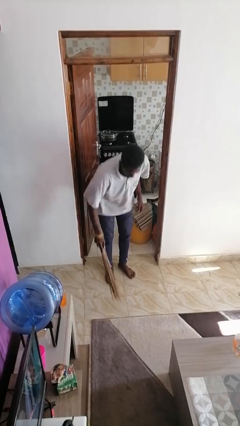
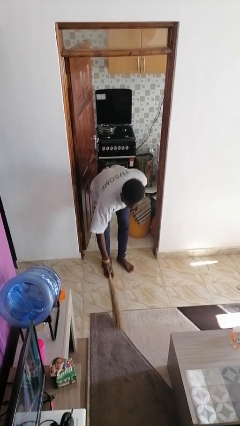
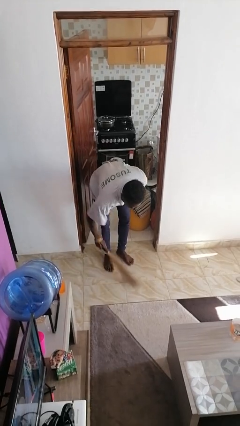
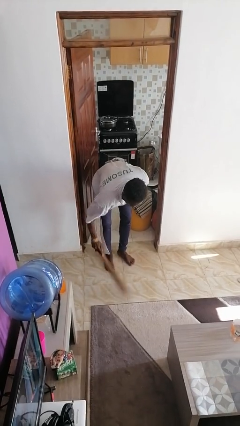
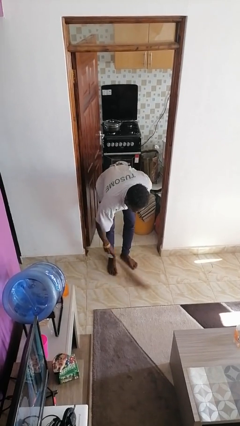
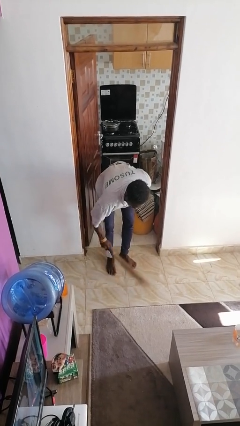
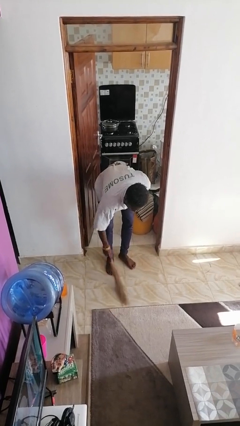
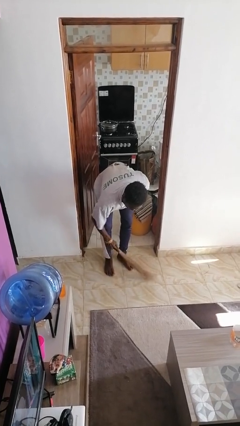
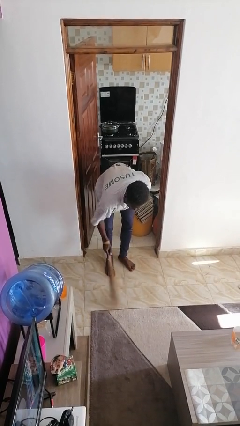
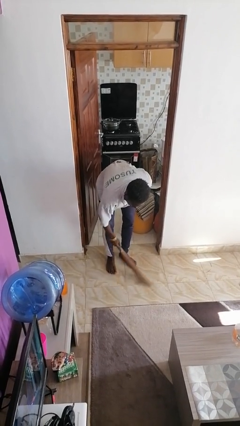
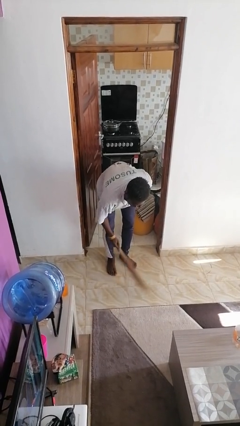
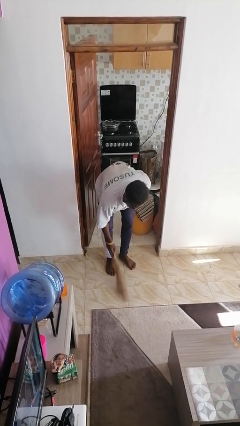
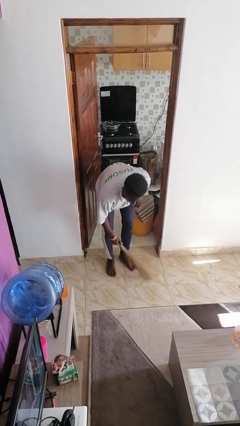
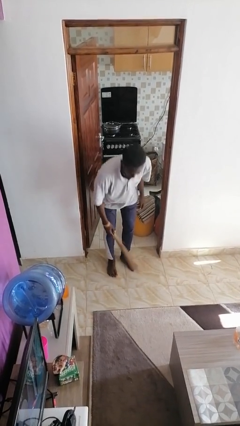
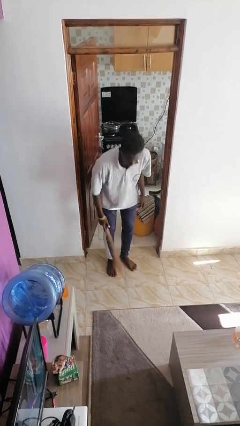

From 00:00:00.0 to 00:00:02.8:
person sweeps floor

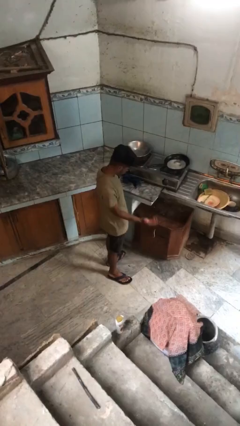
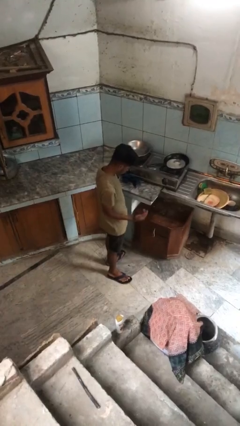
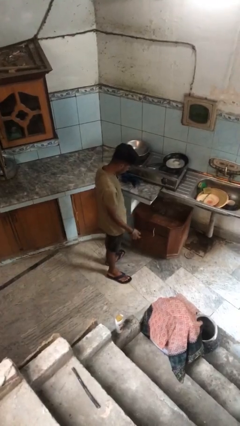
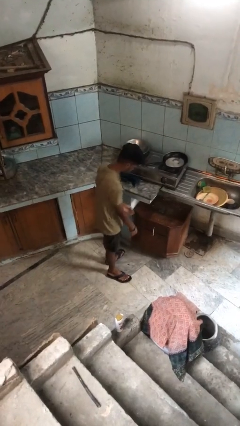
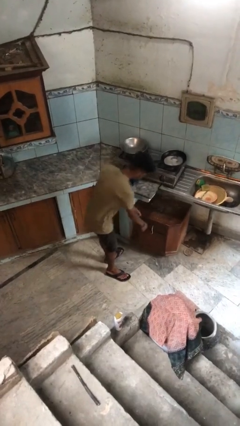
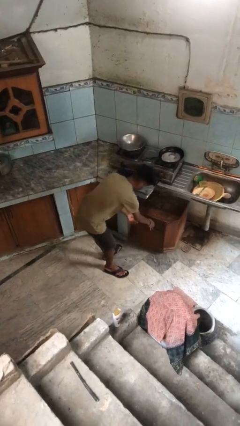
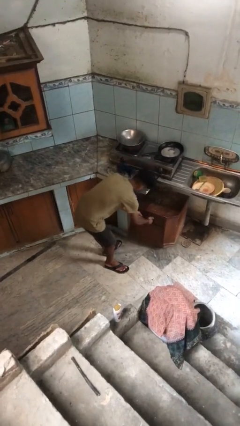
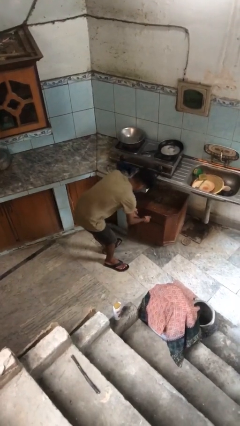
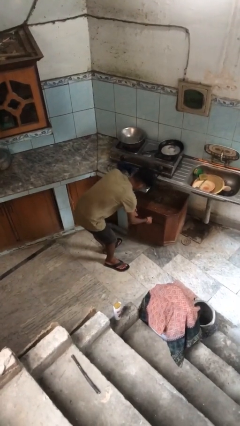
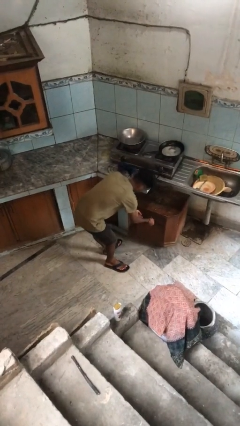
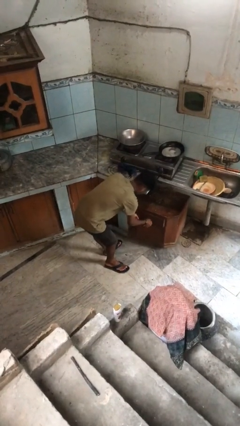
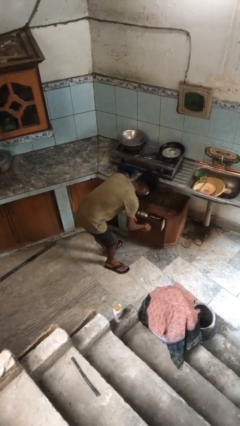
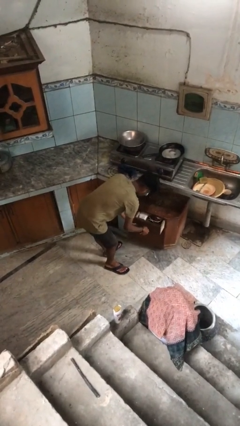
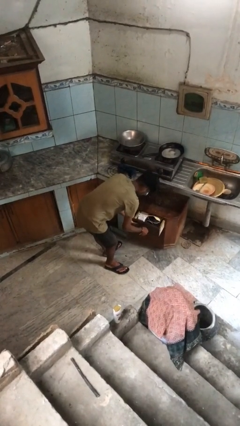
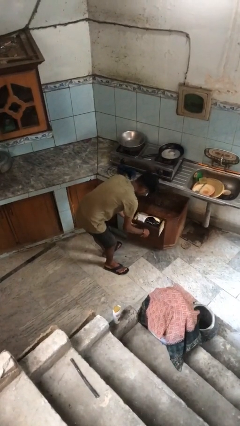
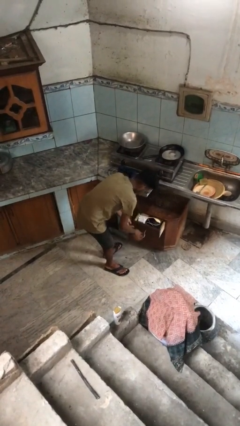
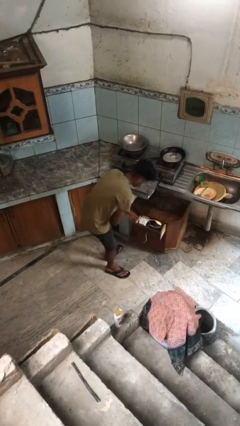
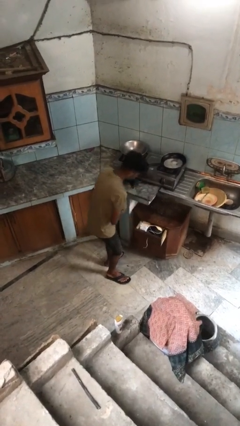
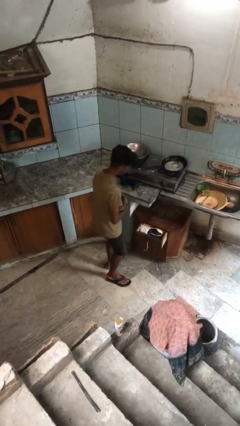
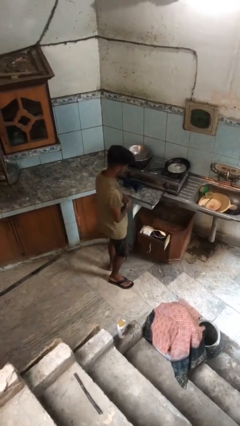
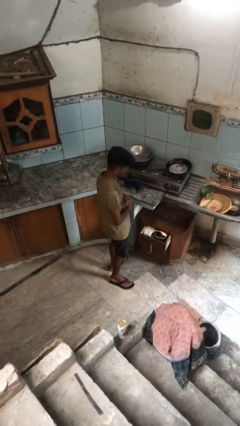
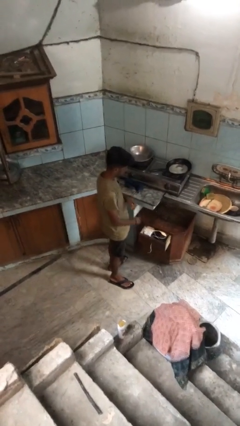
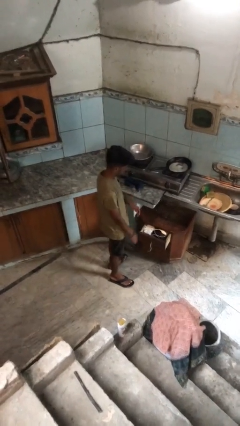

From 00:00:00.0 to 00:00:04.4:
person opens kitchen drawer

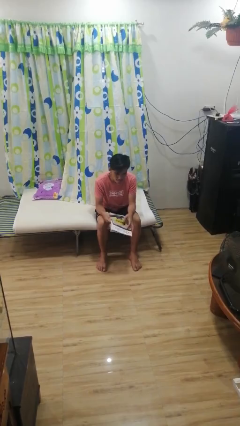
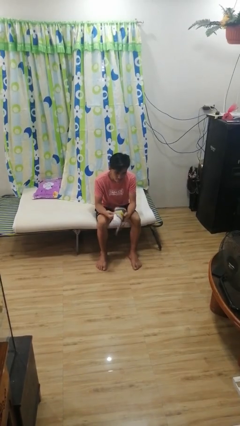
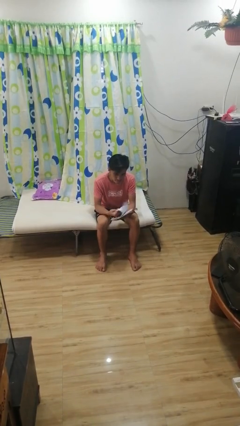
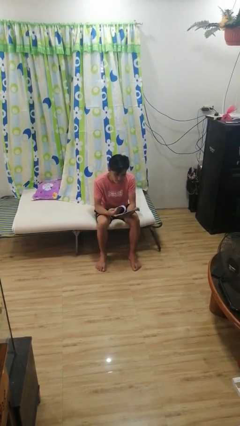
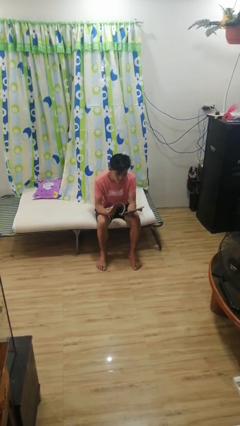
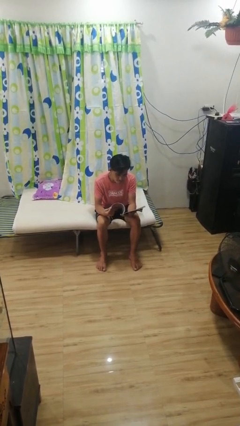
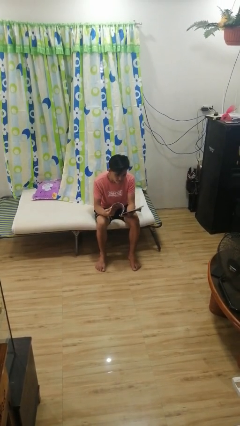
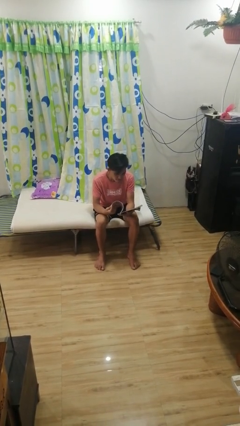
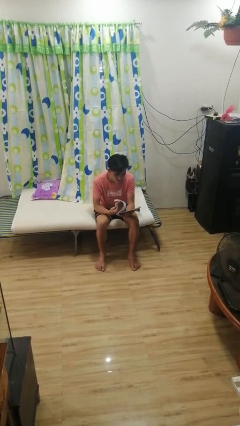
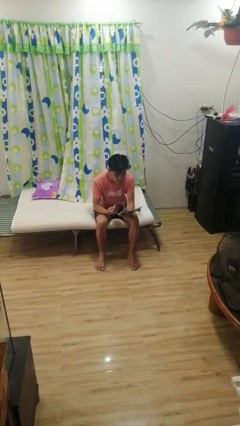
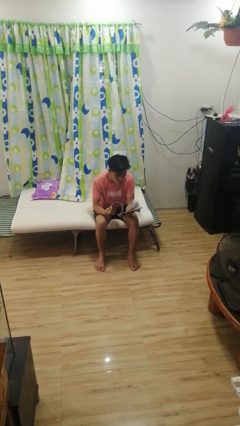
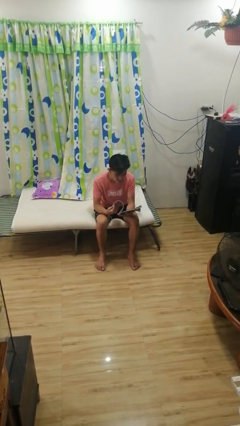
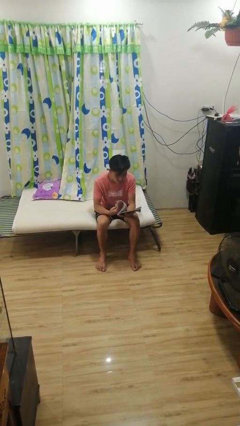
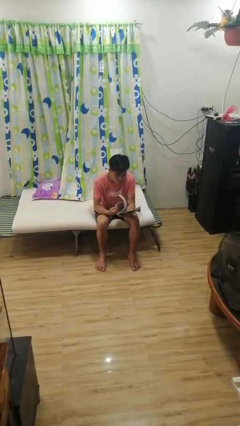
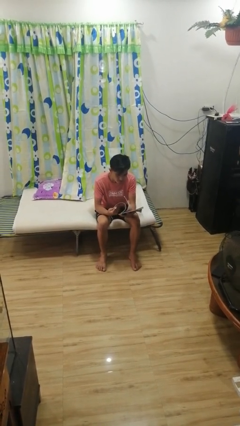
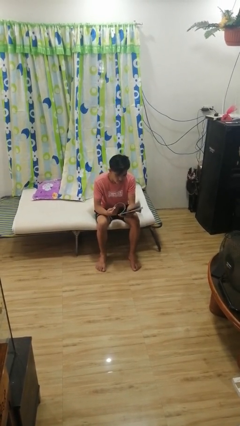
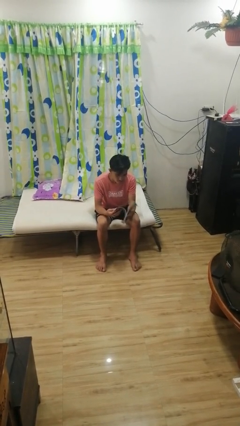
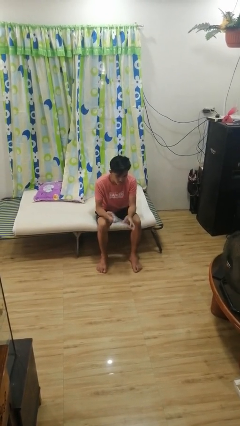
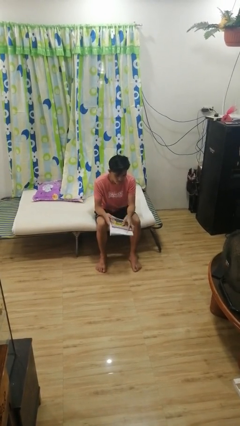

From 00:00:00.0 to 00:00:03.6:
person reads magazine

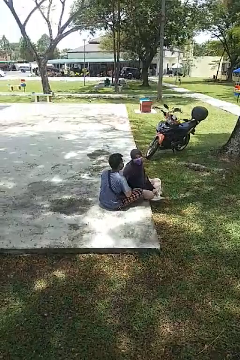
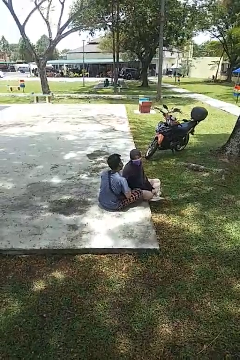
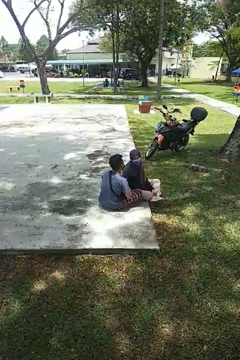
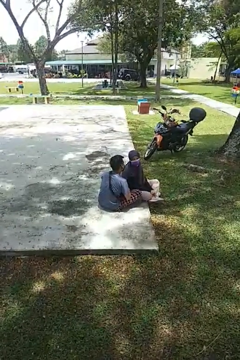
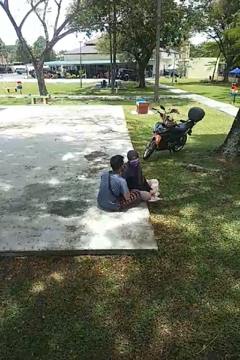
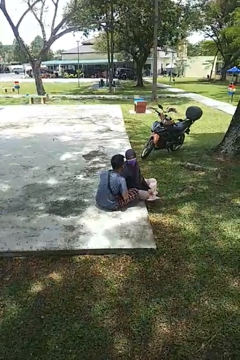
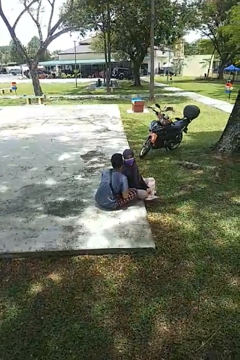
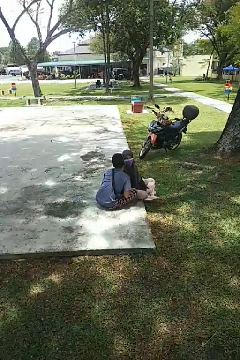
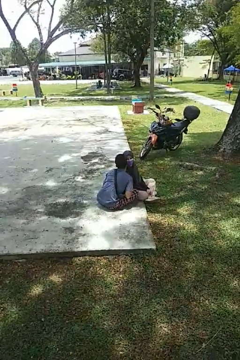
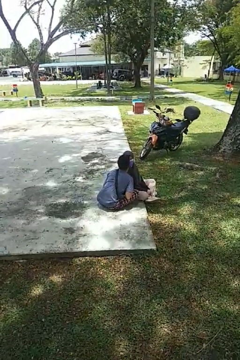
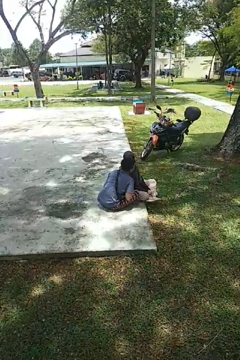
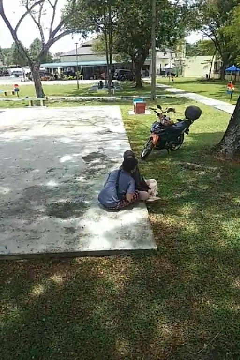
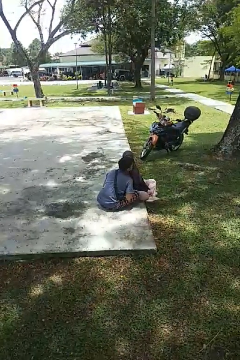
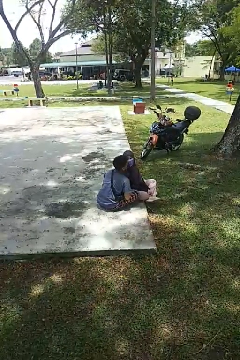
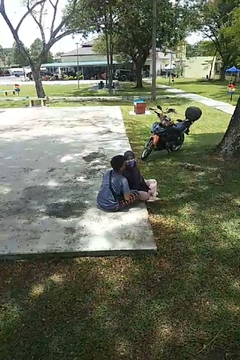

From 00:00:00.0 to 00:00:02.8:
person kisses cheek of person

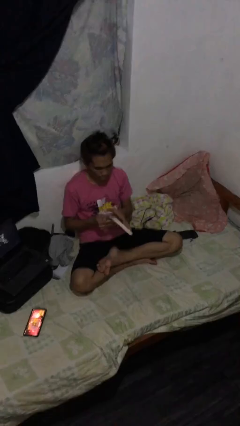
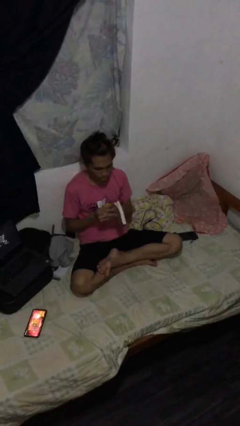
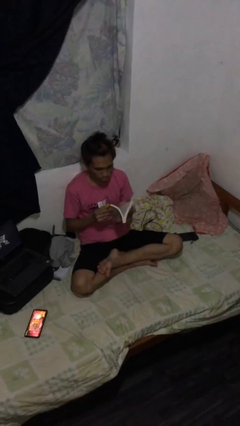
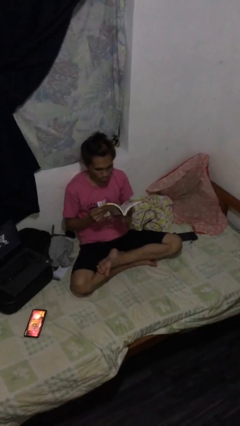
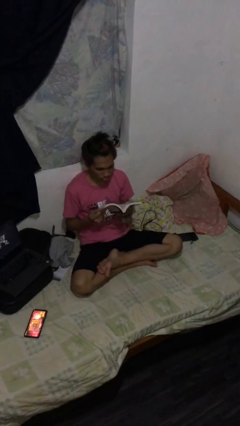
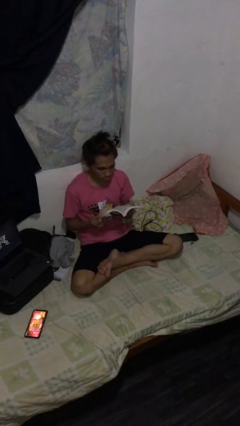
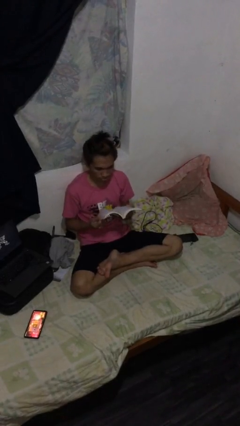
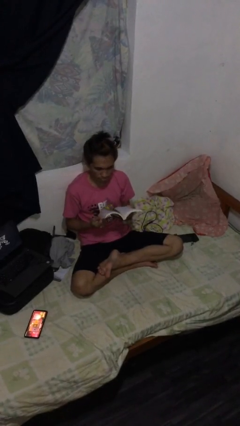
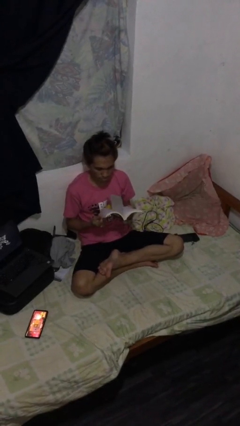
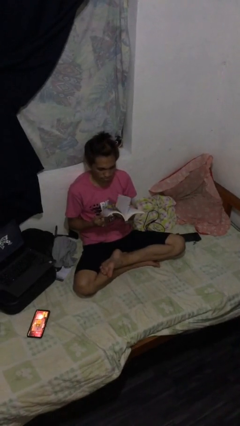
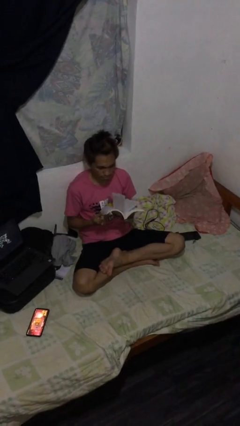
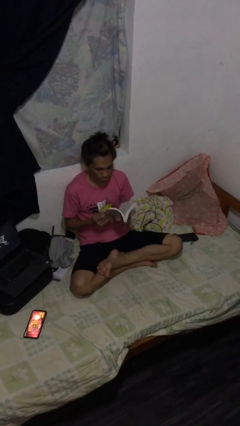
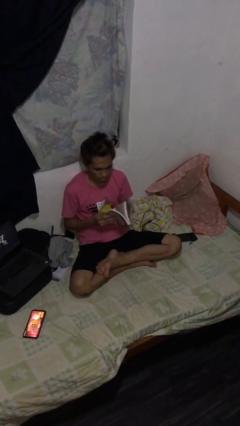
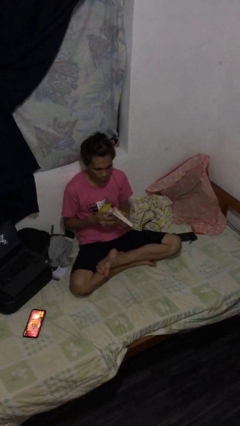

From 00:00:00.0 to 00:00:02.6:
person reads document

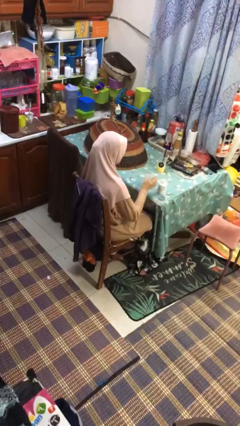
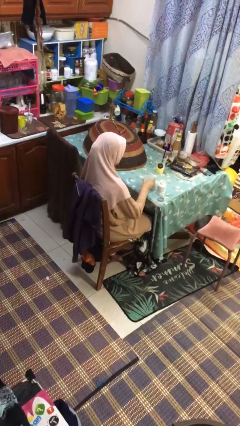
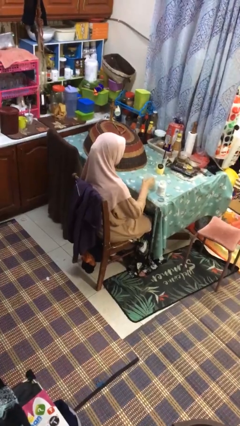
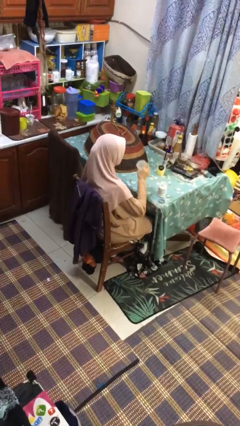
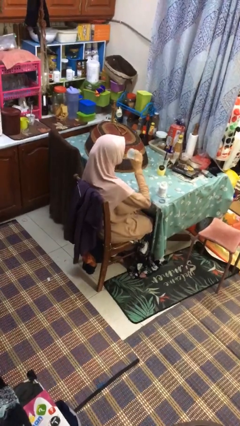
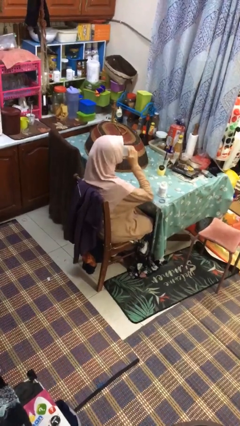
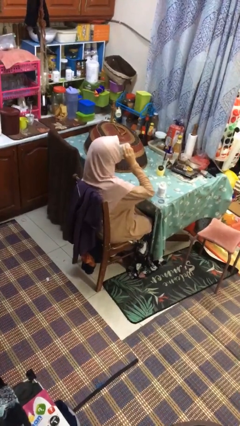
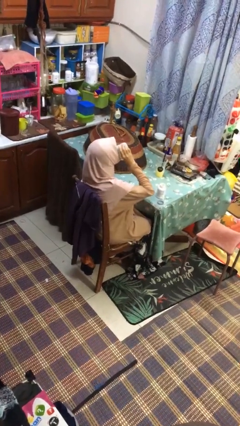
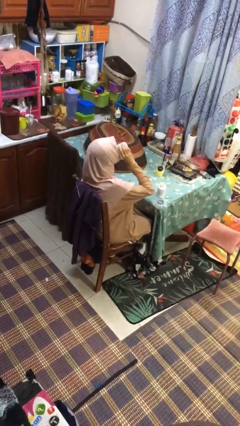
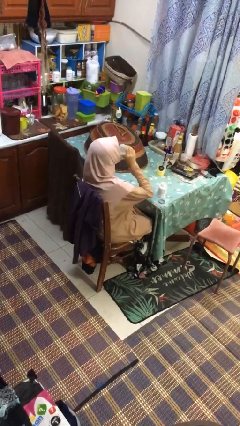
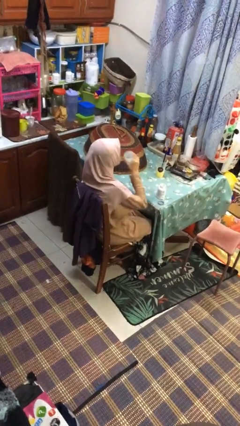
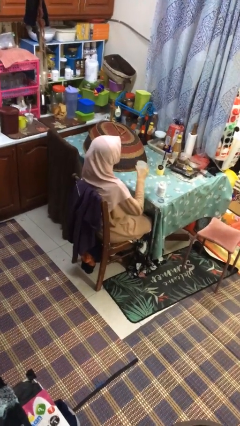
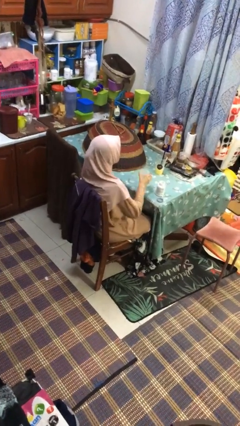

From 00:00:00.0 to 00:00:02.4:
person drinks from cup
